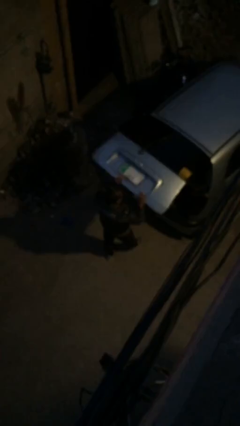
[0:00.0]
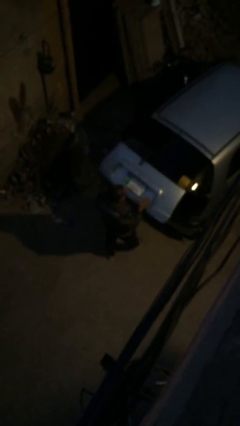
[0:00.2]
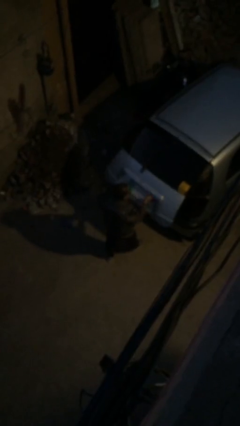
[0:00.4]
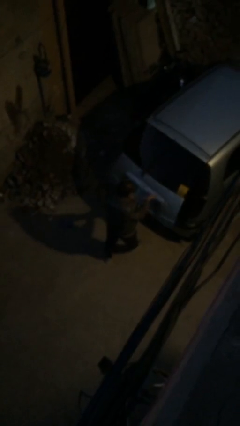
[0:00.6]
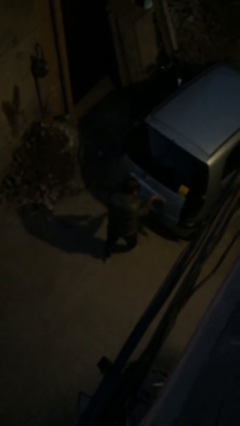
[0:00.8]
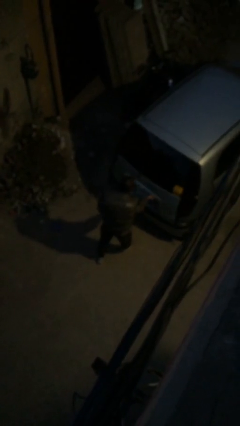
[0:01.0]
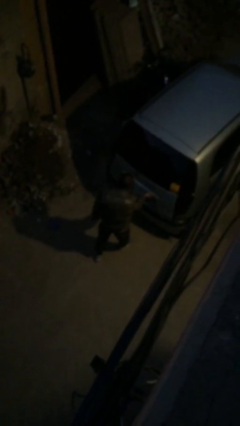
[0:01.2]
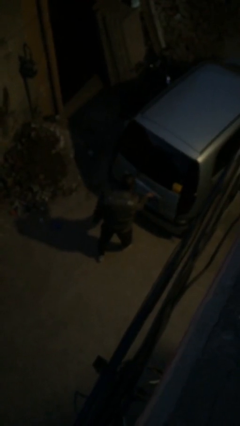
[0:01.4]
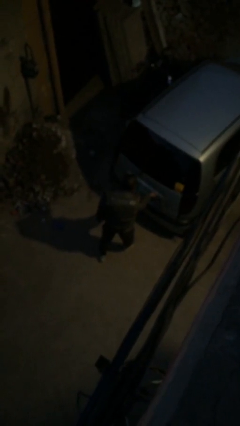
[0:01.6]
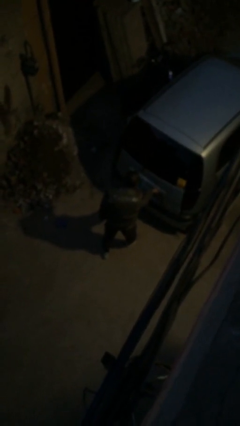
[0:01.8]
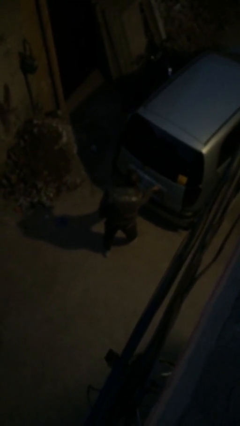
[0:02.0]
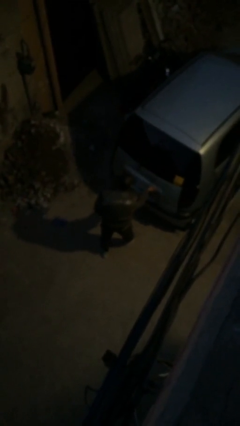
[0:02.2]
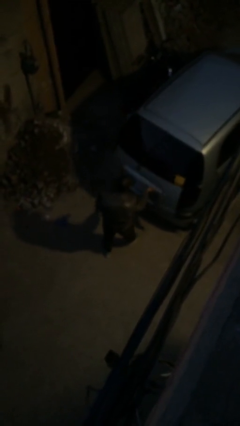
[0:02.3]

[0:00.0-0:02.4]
person closes car trunk

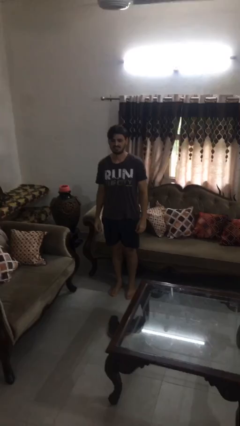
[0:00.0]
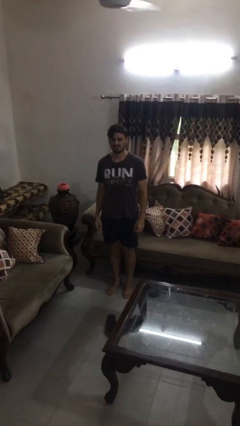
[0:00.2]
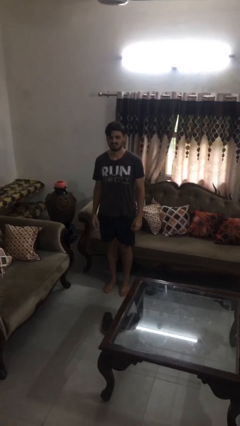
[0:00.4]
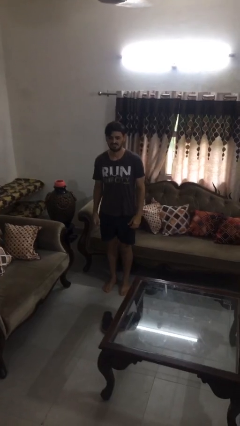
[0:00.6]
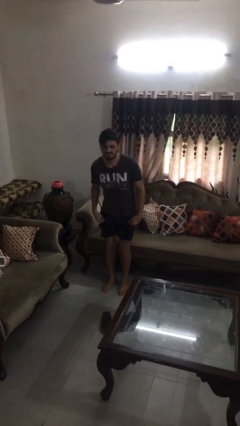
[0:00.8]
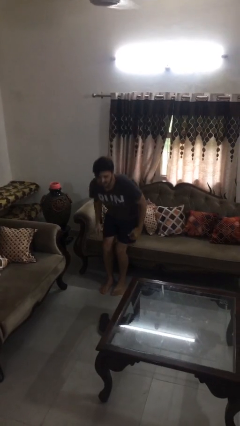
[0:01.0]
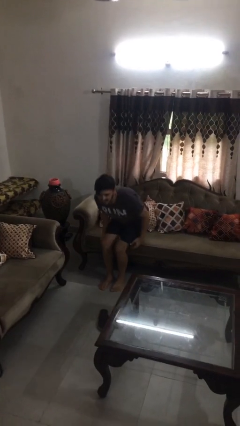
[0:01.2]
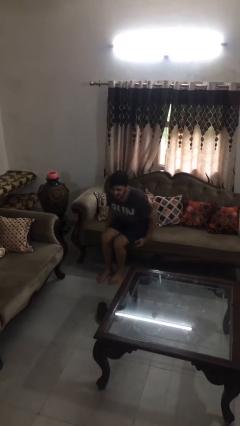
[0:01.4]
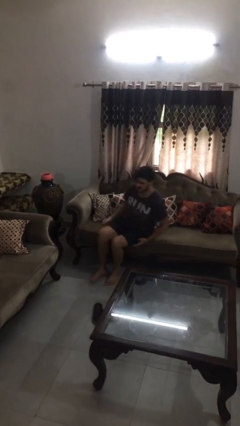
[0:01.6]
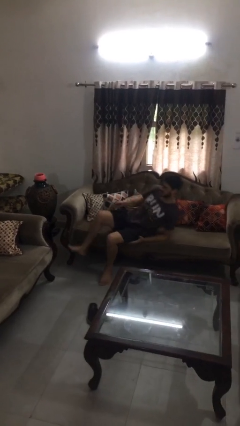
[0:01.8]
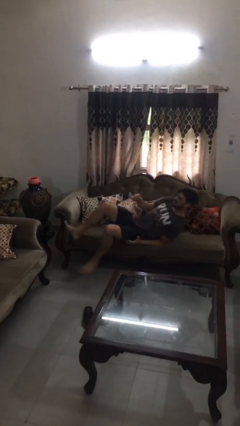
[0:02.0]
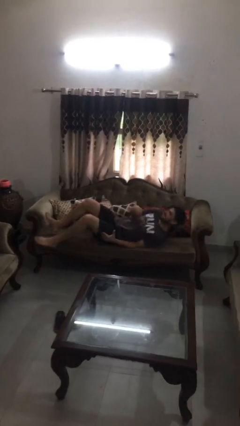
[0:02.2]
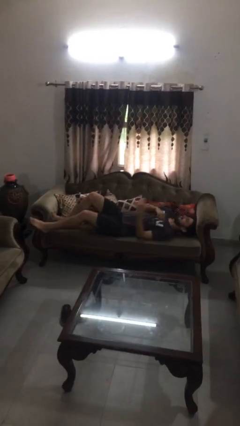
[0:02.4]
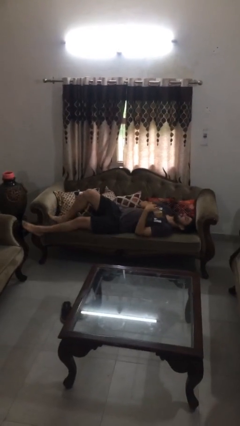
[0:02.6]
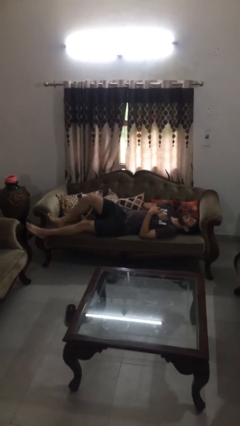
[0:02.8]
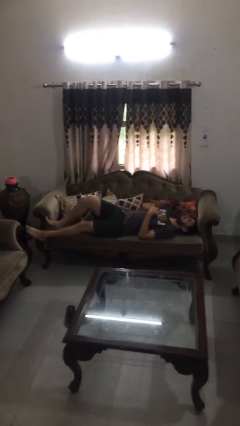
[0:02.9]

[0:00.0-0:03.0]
person lies down on couch

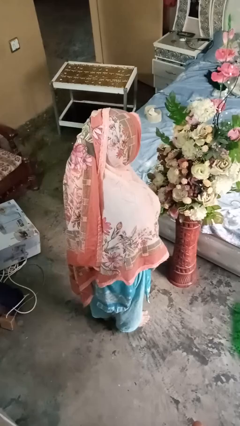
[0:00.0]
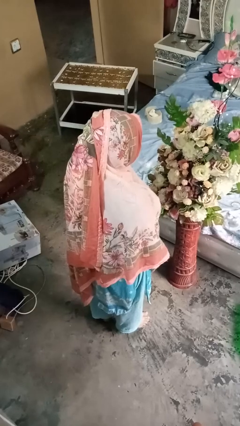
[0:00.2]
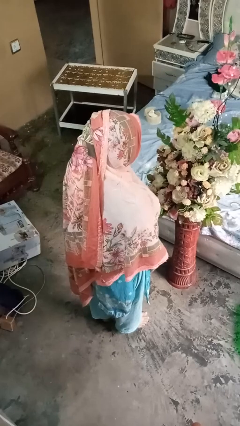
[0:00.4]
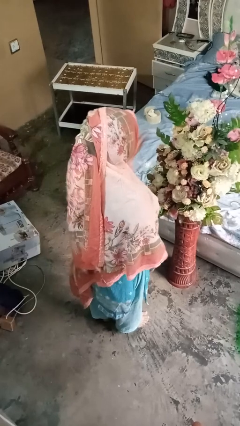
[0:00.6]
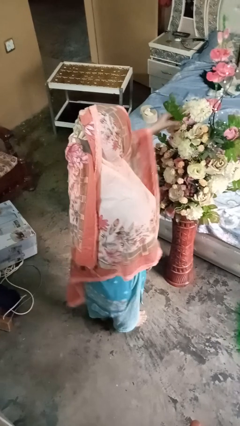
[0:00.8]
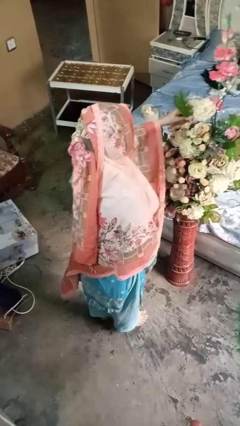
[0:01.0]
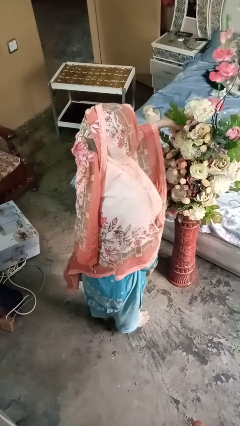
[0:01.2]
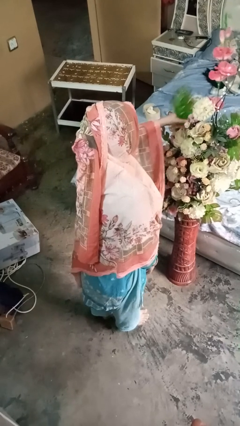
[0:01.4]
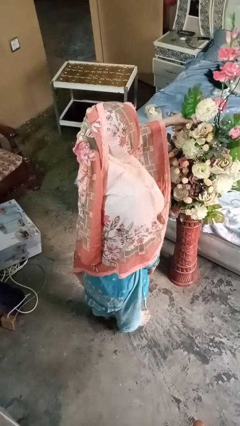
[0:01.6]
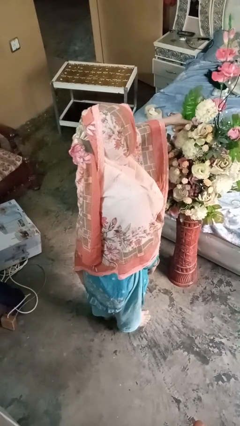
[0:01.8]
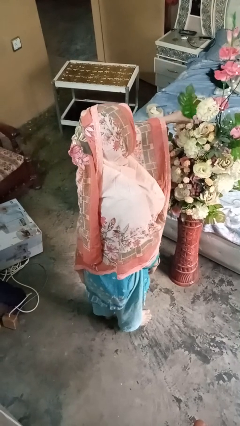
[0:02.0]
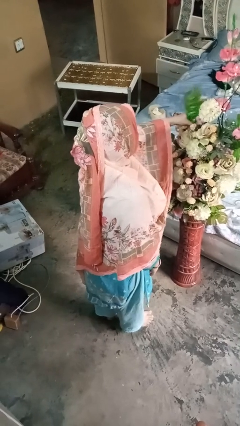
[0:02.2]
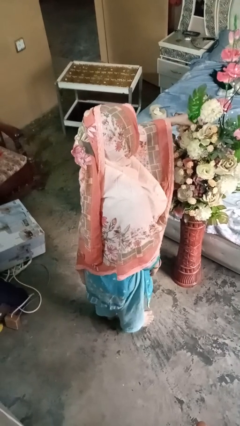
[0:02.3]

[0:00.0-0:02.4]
person arranges flowers in vase

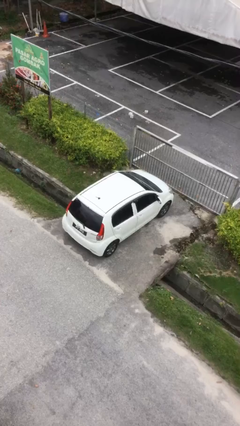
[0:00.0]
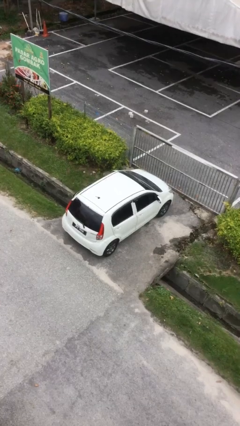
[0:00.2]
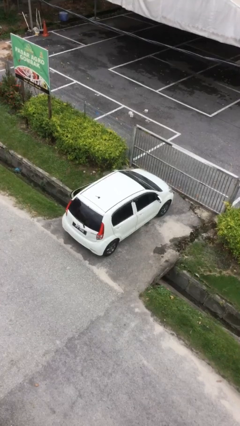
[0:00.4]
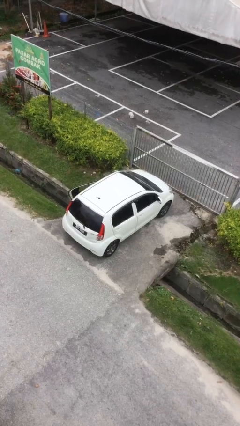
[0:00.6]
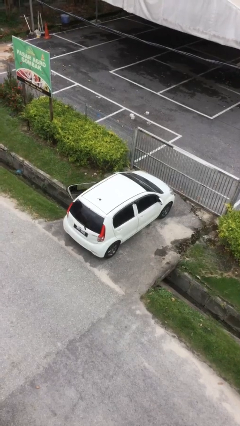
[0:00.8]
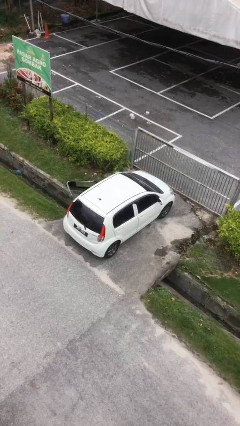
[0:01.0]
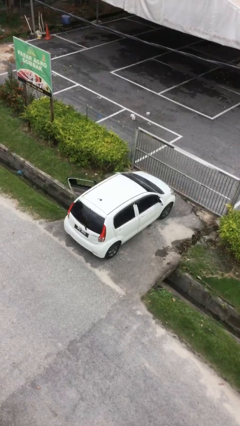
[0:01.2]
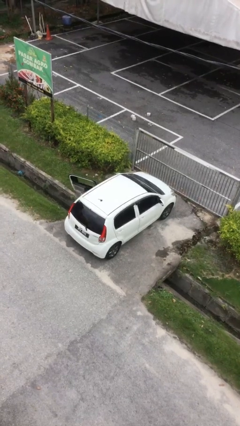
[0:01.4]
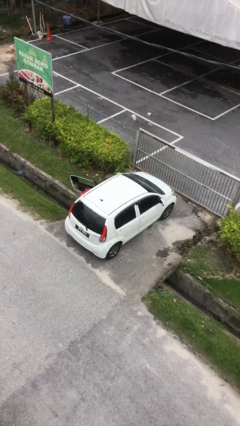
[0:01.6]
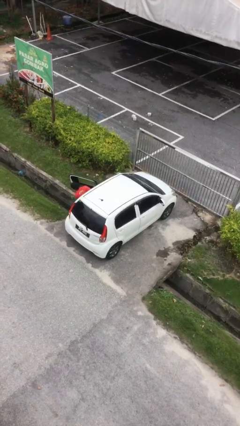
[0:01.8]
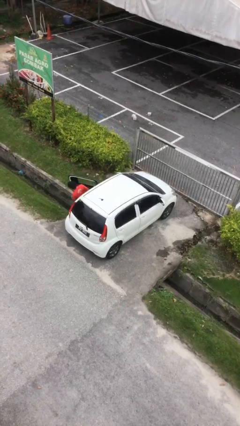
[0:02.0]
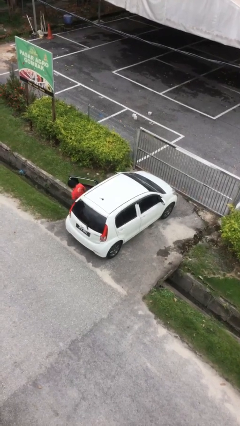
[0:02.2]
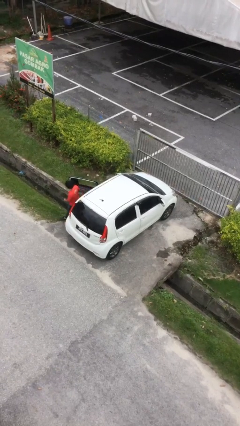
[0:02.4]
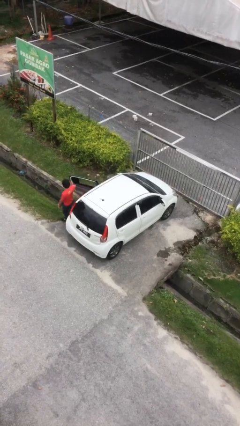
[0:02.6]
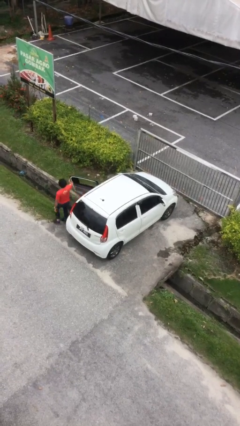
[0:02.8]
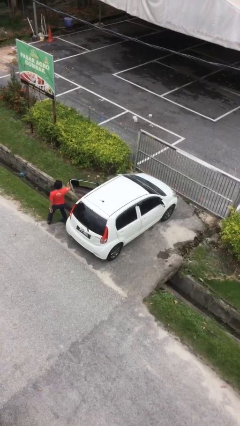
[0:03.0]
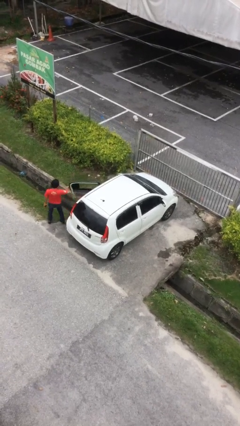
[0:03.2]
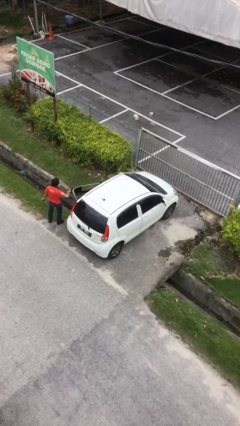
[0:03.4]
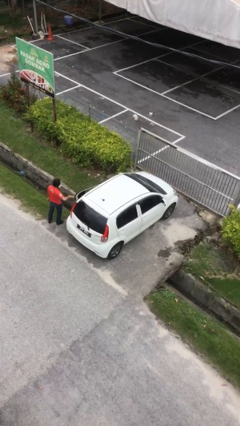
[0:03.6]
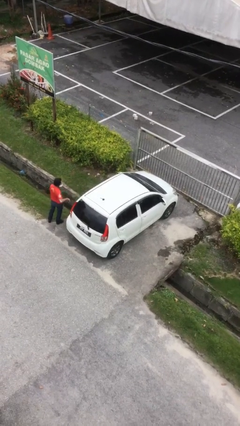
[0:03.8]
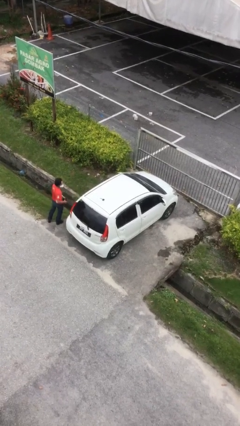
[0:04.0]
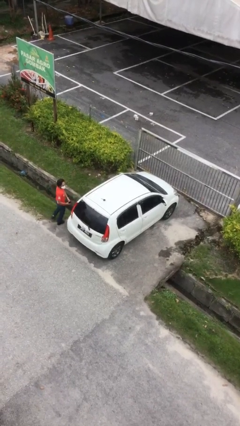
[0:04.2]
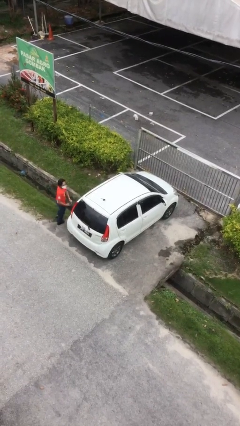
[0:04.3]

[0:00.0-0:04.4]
car drops off person

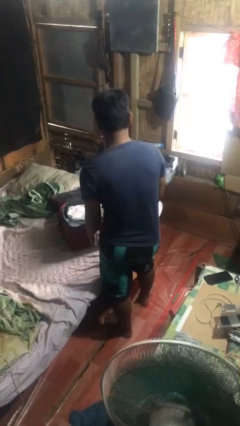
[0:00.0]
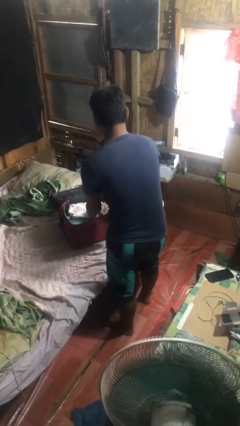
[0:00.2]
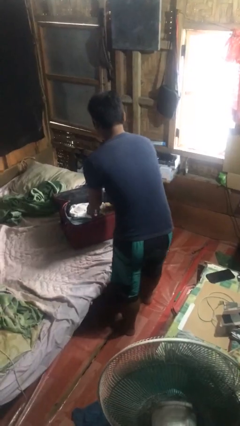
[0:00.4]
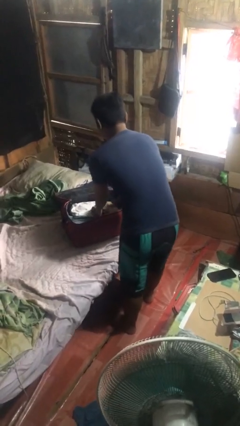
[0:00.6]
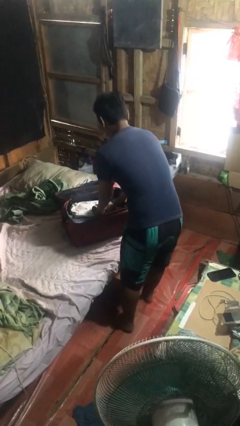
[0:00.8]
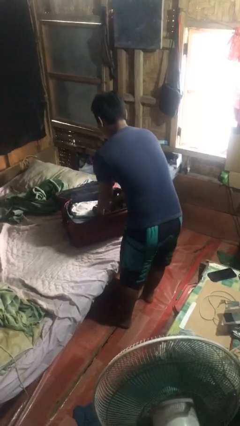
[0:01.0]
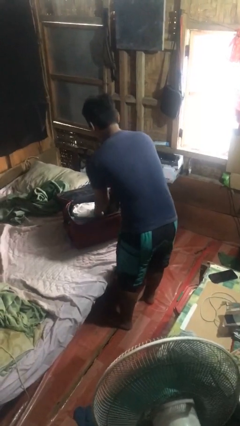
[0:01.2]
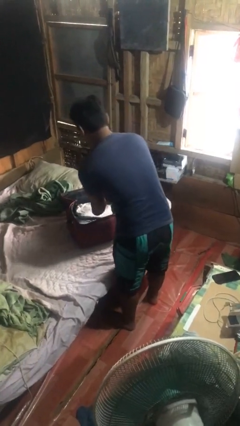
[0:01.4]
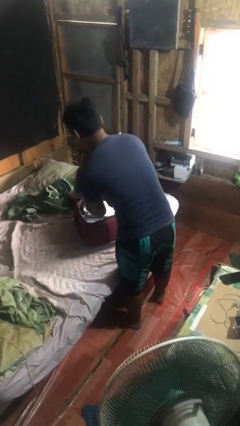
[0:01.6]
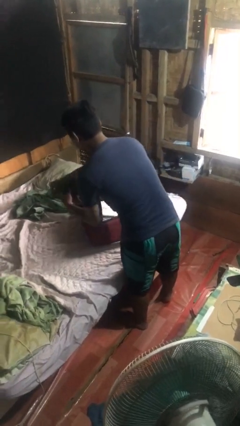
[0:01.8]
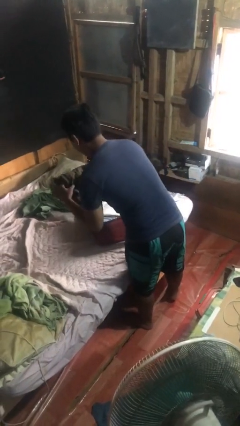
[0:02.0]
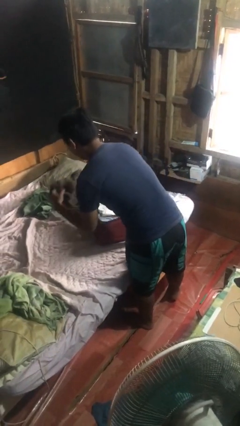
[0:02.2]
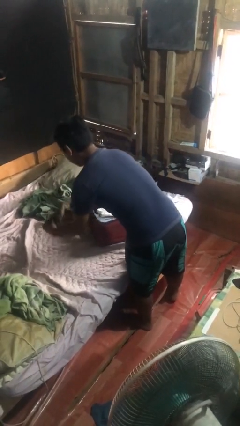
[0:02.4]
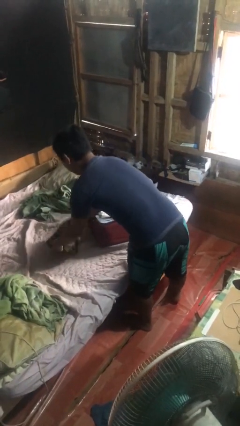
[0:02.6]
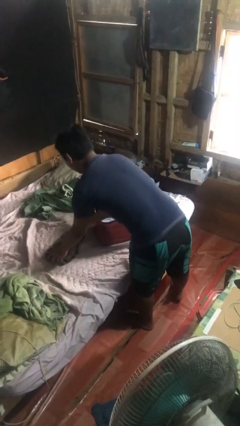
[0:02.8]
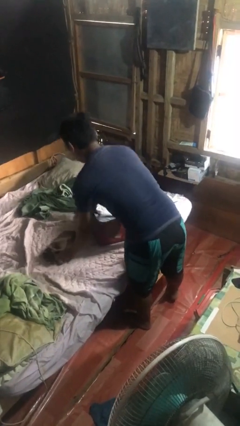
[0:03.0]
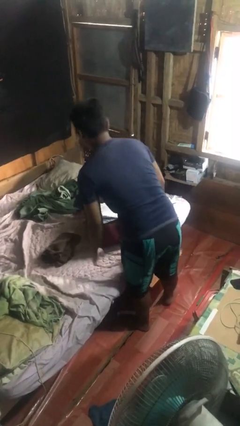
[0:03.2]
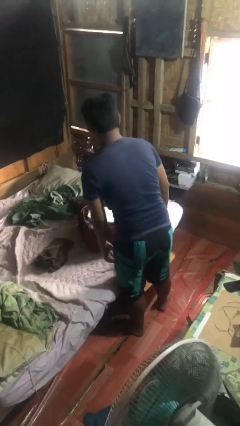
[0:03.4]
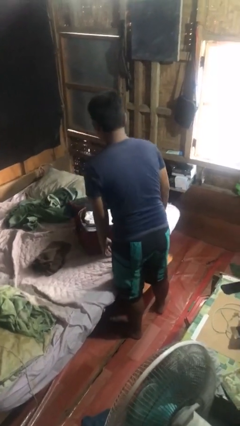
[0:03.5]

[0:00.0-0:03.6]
person unloads clothes from suitcase

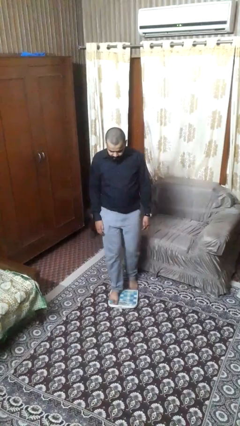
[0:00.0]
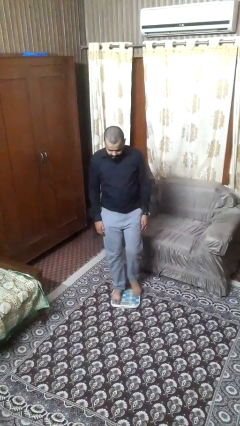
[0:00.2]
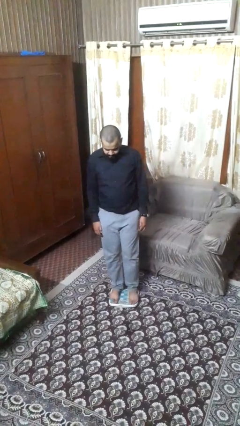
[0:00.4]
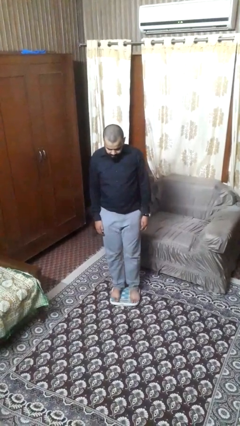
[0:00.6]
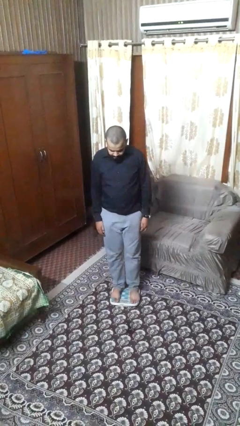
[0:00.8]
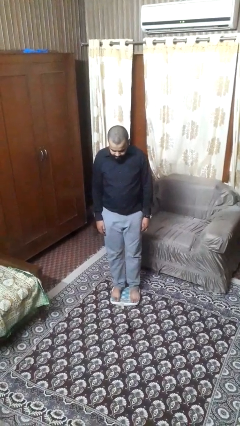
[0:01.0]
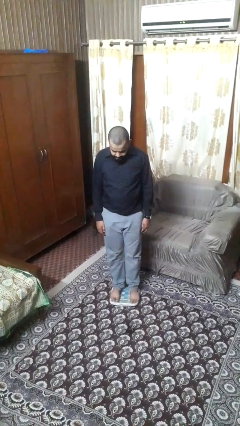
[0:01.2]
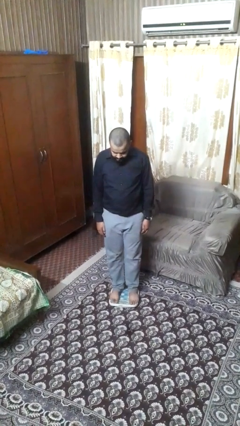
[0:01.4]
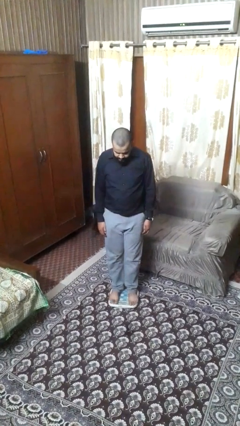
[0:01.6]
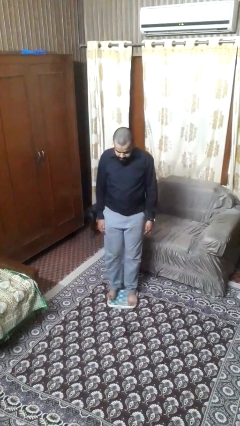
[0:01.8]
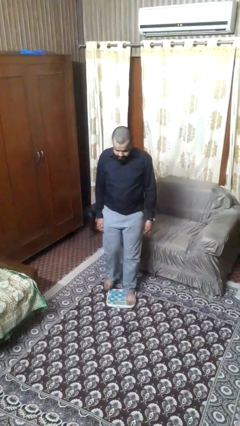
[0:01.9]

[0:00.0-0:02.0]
person uses bodyweight scale
